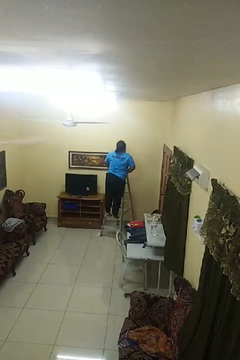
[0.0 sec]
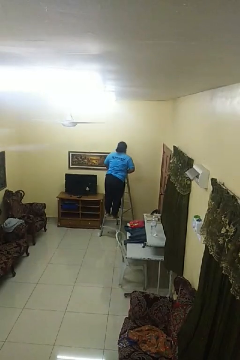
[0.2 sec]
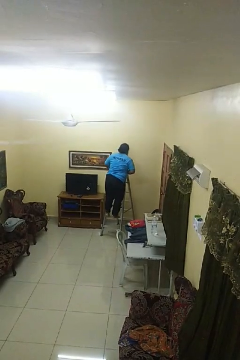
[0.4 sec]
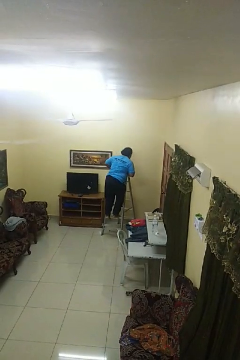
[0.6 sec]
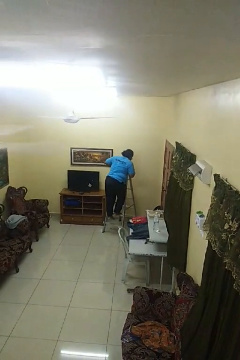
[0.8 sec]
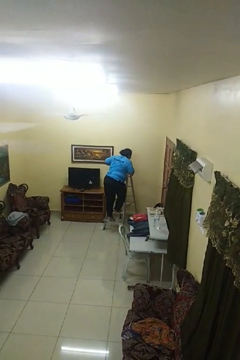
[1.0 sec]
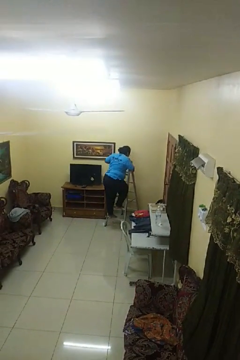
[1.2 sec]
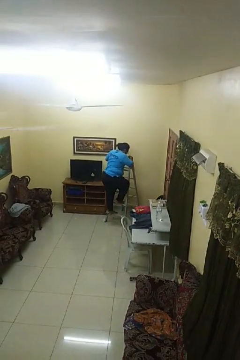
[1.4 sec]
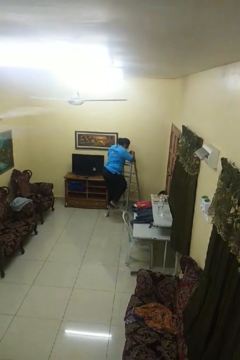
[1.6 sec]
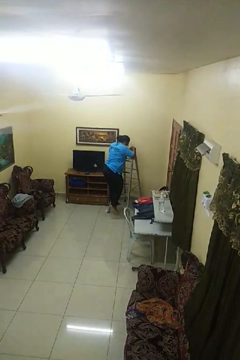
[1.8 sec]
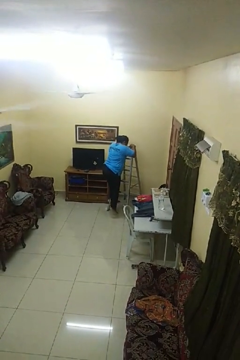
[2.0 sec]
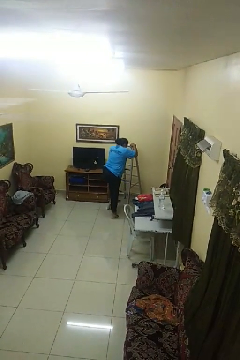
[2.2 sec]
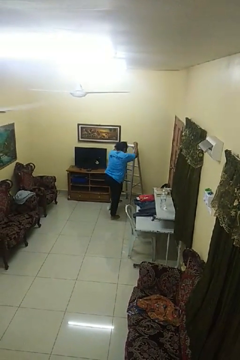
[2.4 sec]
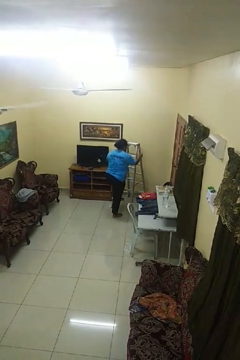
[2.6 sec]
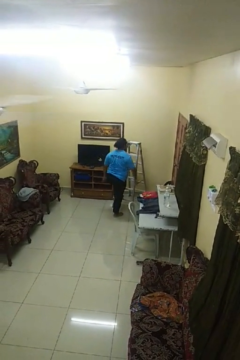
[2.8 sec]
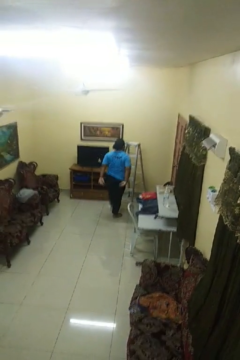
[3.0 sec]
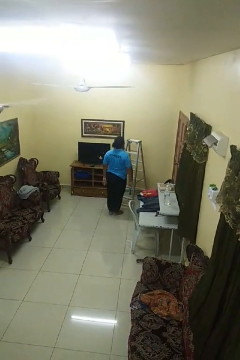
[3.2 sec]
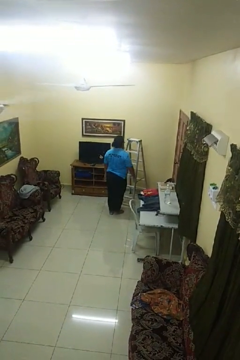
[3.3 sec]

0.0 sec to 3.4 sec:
person climbs down ladder

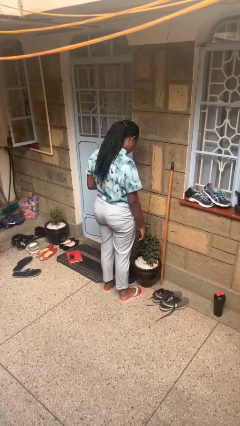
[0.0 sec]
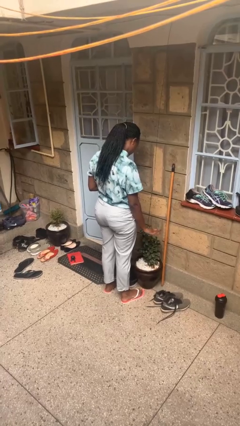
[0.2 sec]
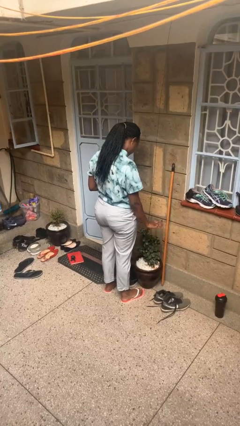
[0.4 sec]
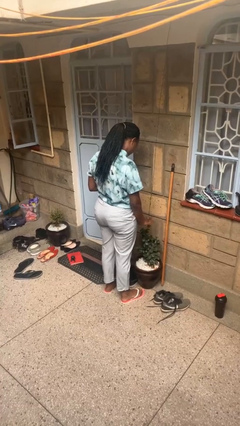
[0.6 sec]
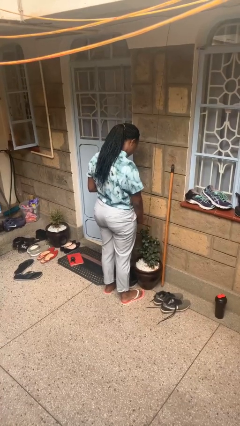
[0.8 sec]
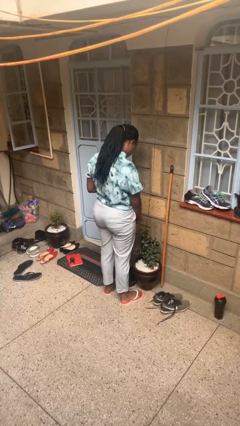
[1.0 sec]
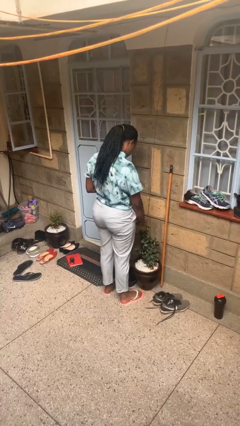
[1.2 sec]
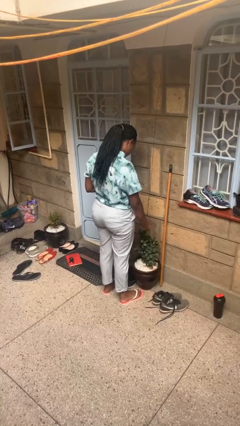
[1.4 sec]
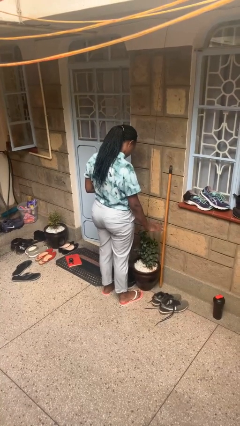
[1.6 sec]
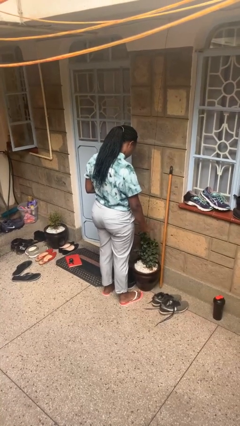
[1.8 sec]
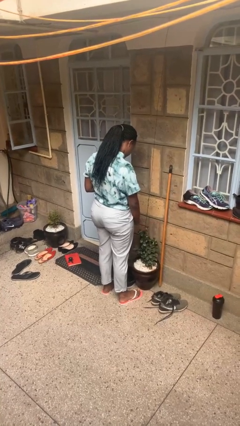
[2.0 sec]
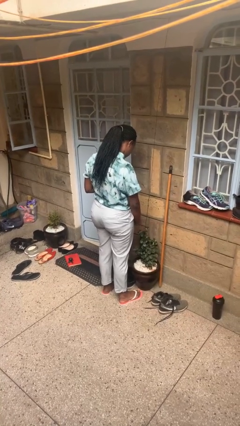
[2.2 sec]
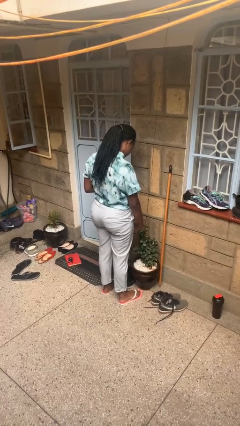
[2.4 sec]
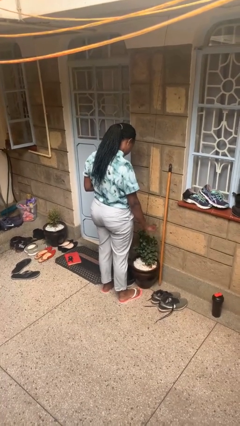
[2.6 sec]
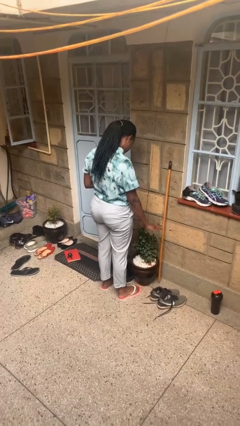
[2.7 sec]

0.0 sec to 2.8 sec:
person waves hand over object

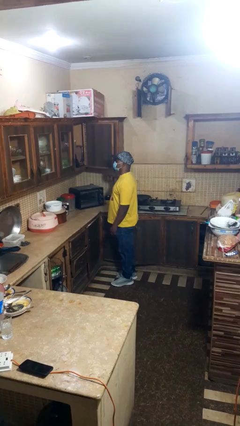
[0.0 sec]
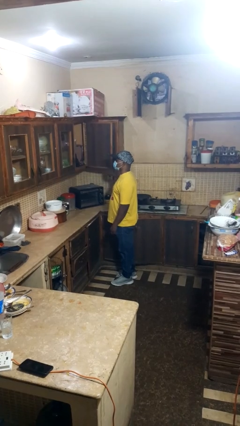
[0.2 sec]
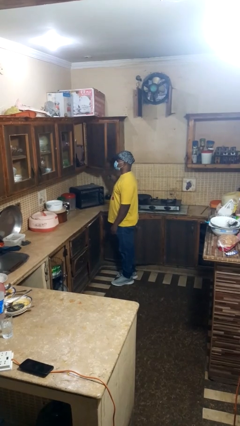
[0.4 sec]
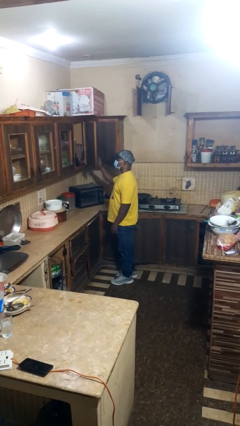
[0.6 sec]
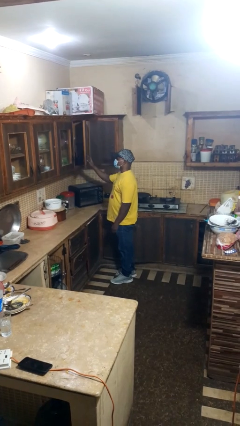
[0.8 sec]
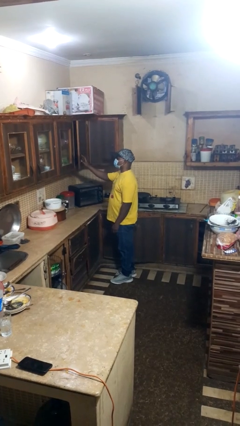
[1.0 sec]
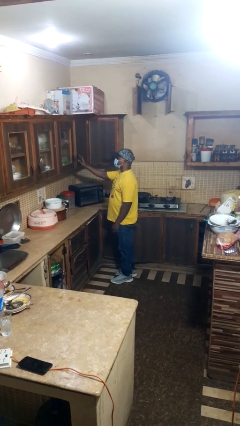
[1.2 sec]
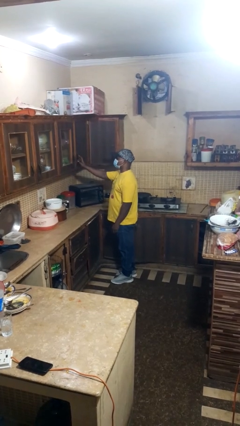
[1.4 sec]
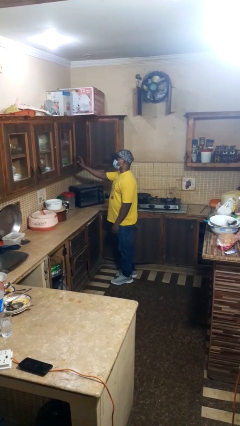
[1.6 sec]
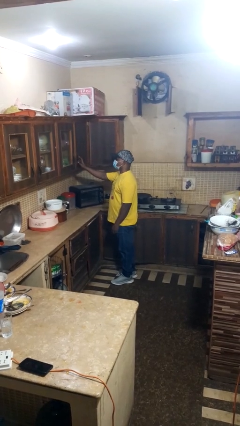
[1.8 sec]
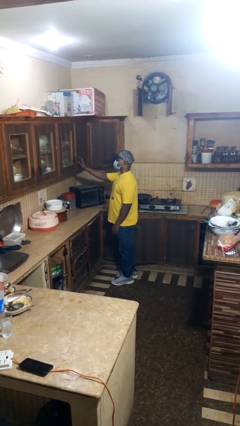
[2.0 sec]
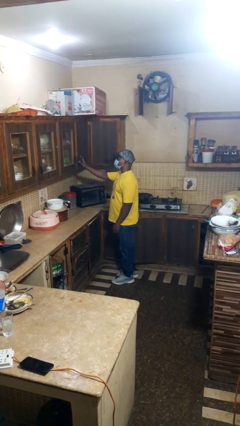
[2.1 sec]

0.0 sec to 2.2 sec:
person closes cabinet

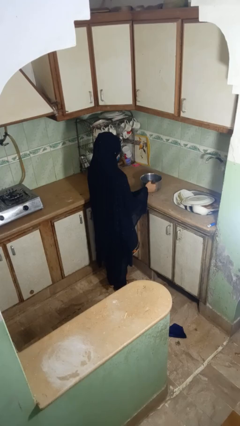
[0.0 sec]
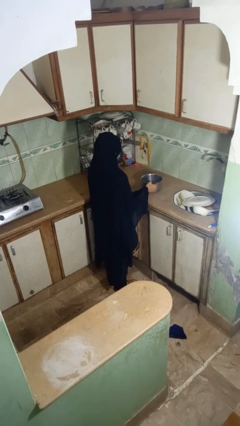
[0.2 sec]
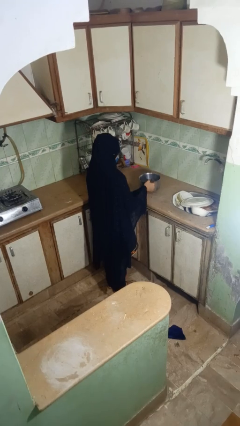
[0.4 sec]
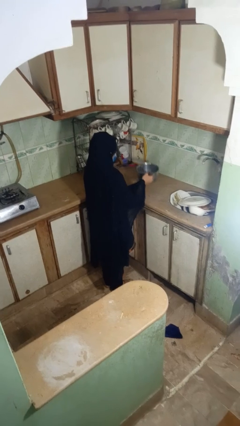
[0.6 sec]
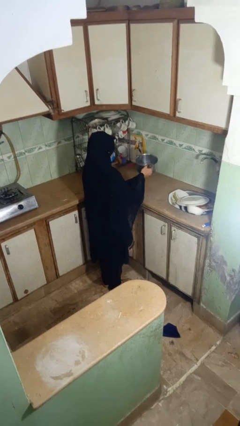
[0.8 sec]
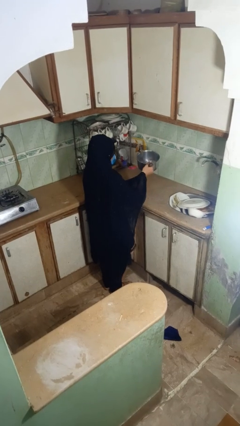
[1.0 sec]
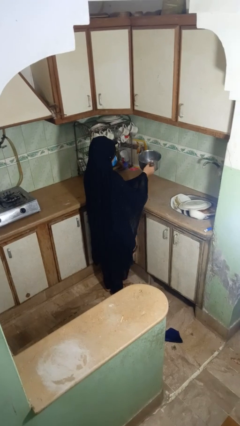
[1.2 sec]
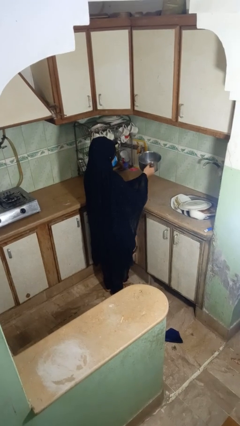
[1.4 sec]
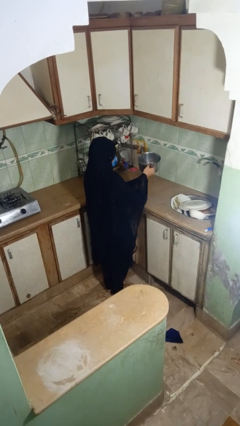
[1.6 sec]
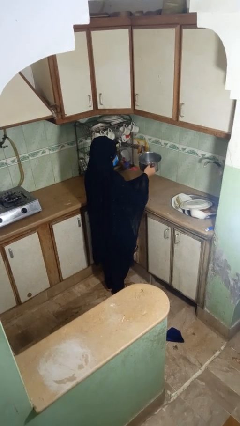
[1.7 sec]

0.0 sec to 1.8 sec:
person picks up object from countertop

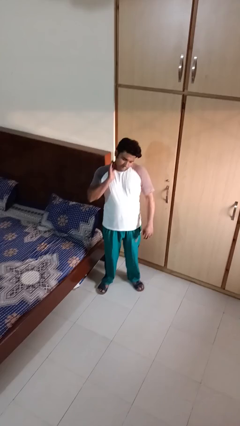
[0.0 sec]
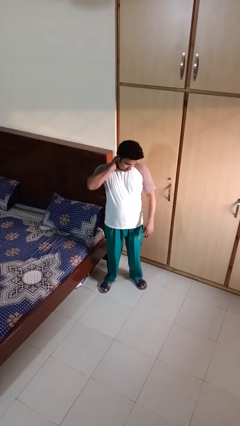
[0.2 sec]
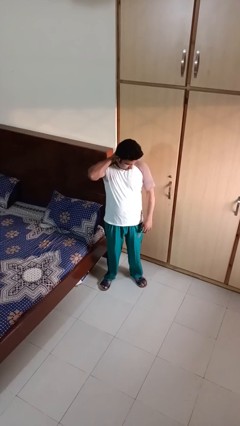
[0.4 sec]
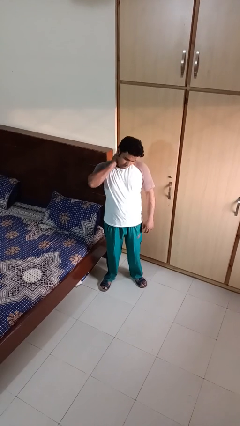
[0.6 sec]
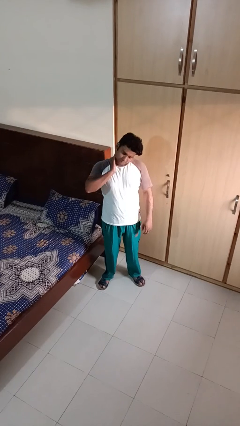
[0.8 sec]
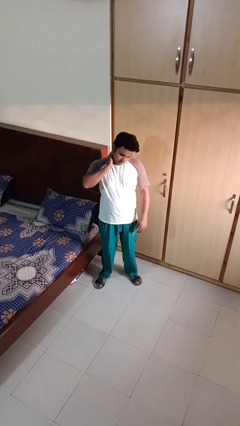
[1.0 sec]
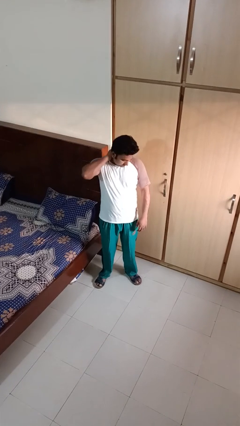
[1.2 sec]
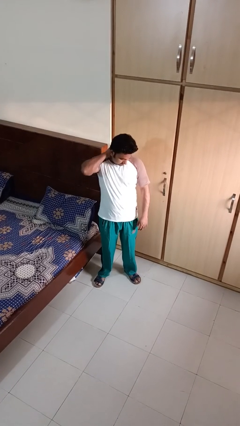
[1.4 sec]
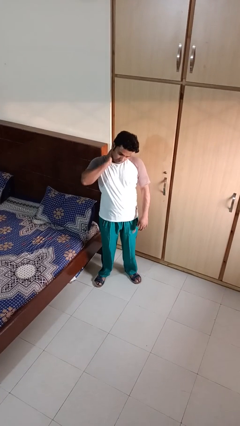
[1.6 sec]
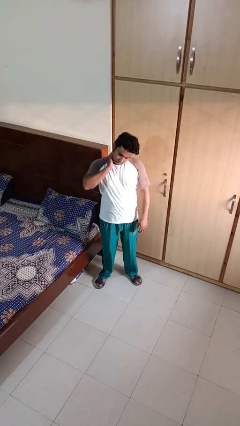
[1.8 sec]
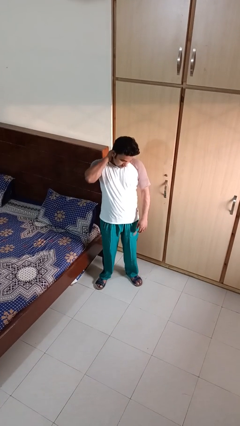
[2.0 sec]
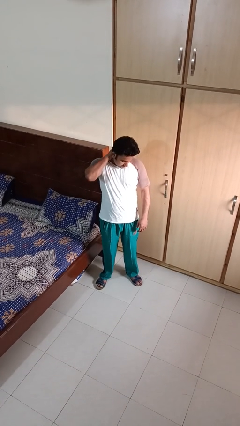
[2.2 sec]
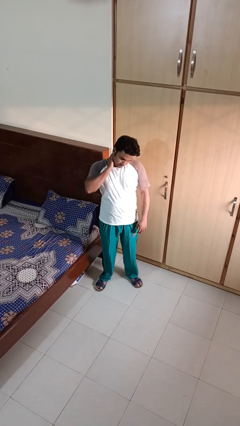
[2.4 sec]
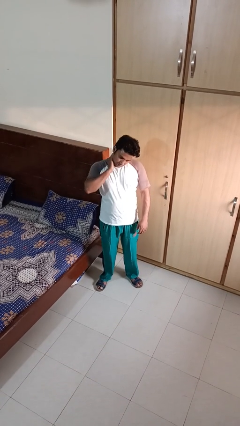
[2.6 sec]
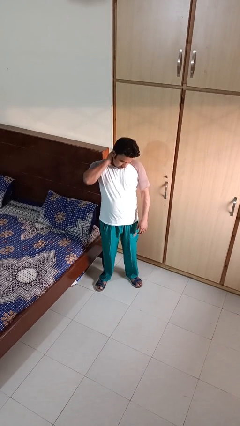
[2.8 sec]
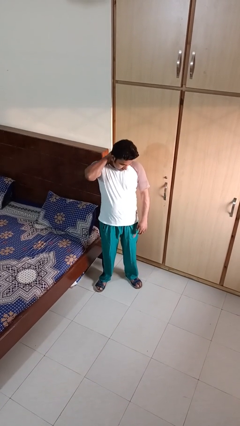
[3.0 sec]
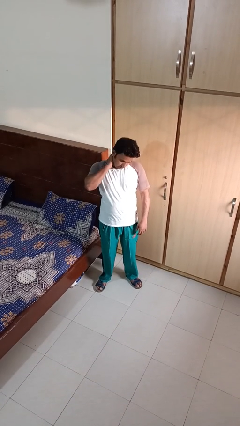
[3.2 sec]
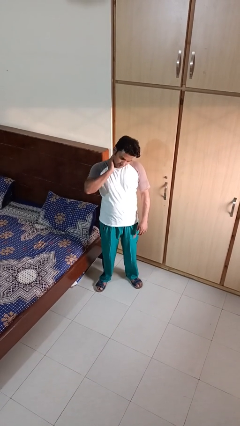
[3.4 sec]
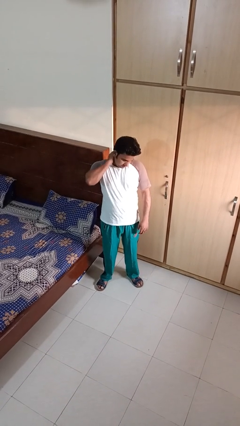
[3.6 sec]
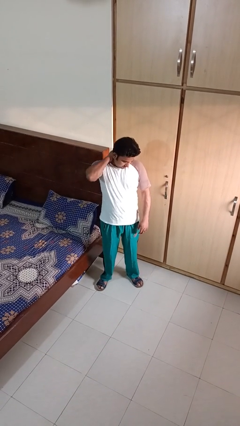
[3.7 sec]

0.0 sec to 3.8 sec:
person rubs neck

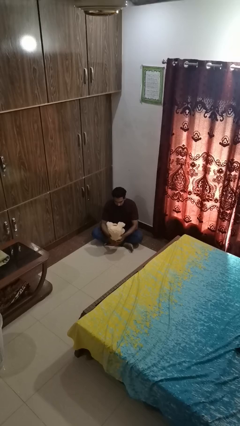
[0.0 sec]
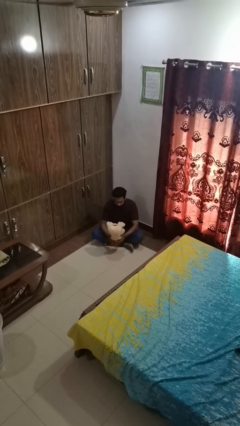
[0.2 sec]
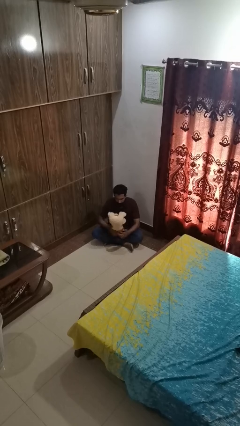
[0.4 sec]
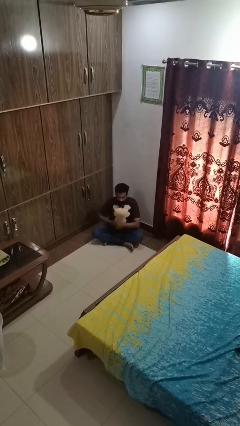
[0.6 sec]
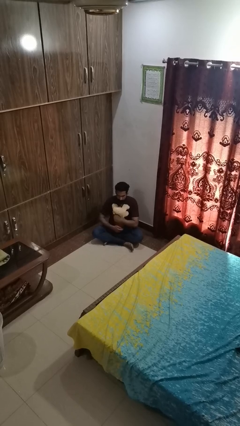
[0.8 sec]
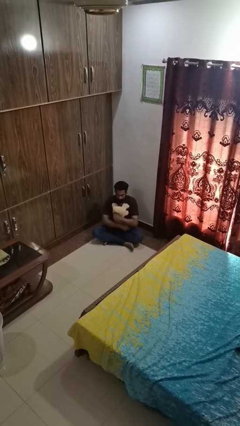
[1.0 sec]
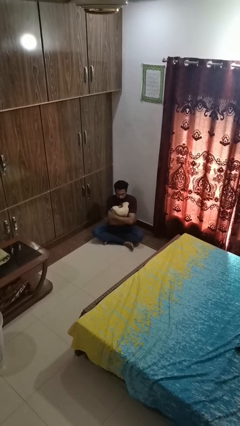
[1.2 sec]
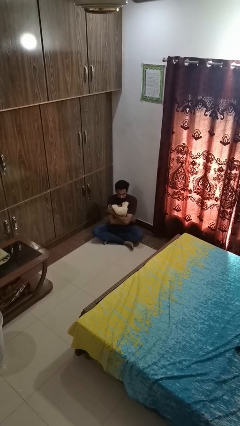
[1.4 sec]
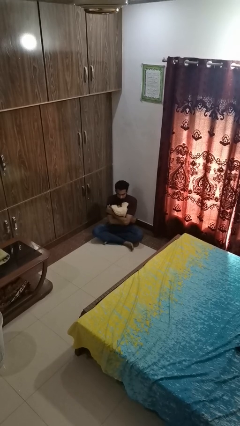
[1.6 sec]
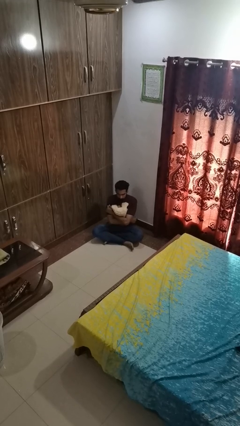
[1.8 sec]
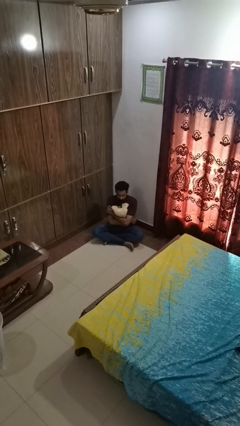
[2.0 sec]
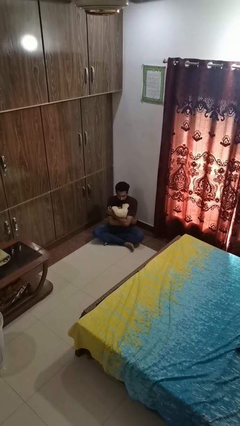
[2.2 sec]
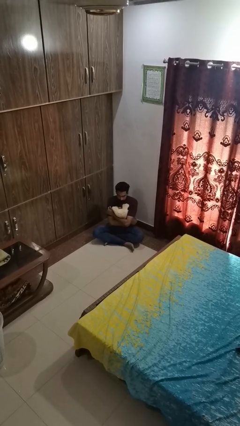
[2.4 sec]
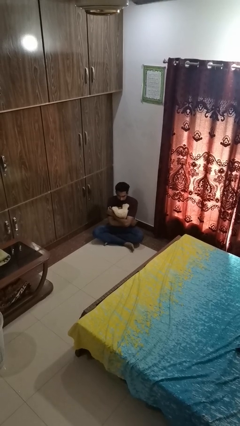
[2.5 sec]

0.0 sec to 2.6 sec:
person hugs stuffed animal

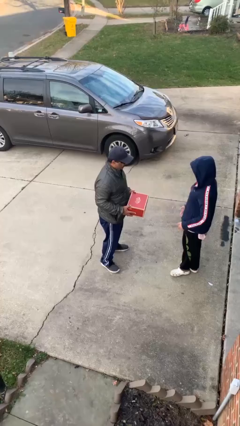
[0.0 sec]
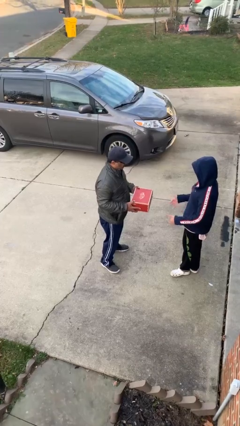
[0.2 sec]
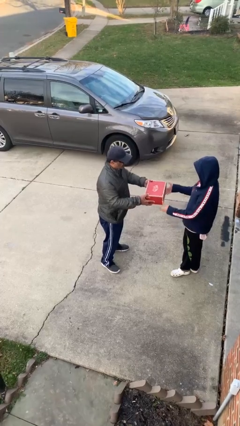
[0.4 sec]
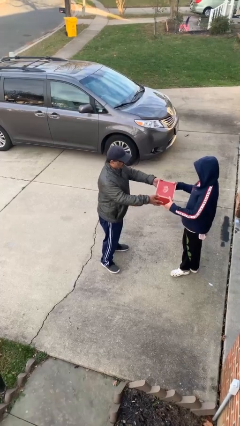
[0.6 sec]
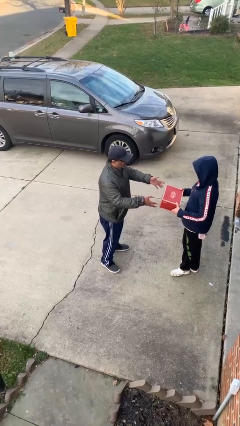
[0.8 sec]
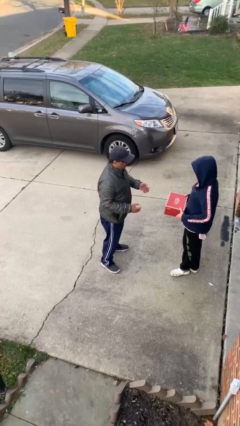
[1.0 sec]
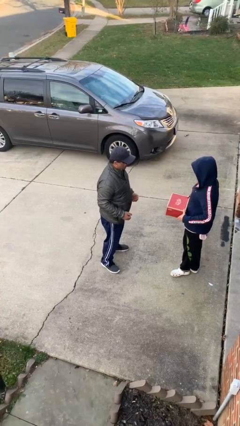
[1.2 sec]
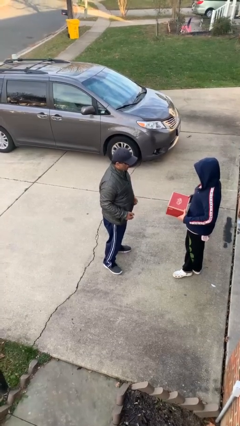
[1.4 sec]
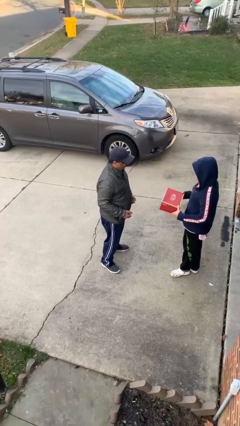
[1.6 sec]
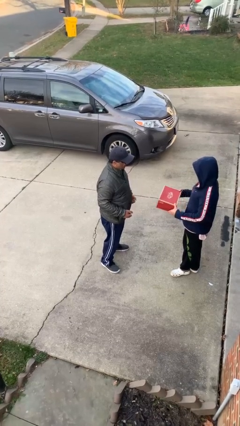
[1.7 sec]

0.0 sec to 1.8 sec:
person transfers object to person
